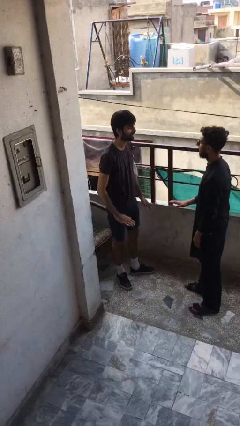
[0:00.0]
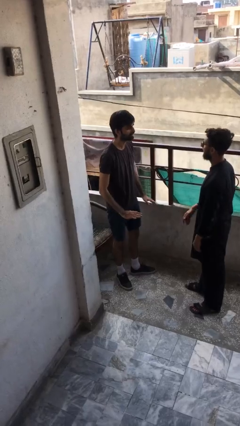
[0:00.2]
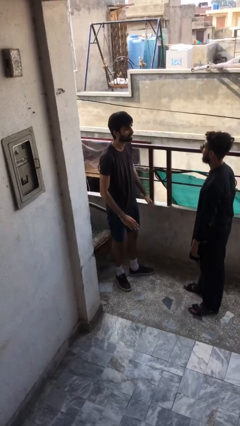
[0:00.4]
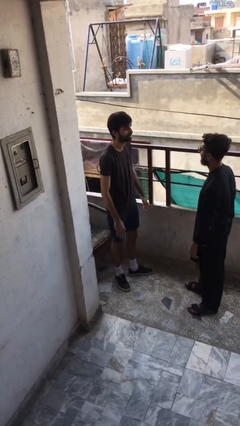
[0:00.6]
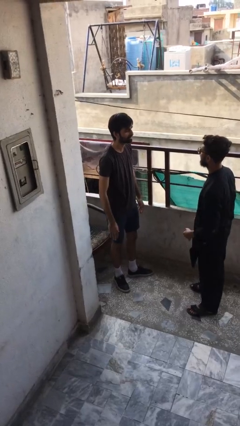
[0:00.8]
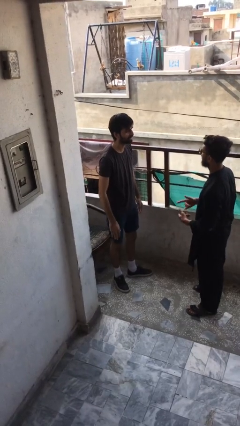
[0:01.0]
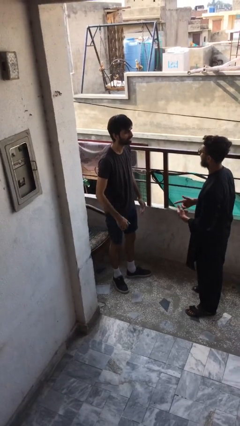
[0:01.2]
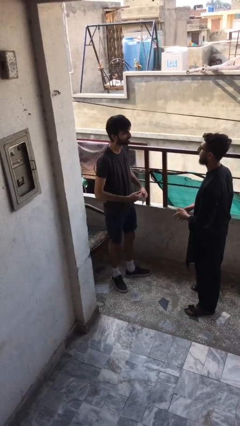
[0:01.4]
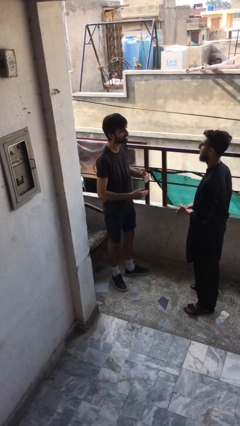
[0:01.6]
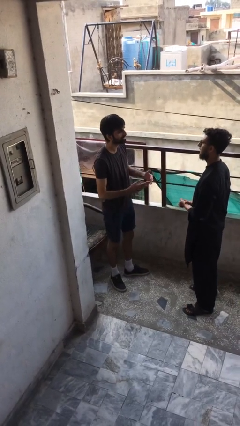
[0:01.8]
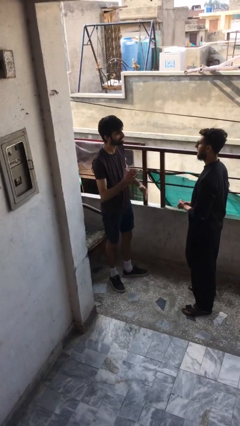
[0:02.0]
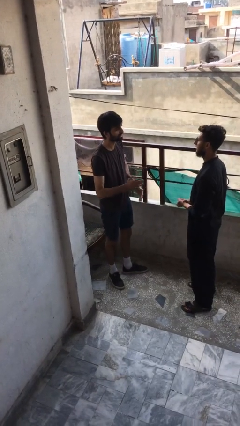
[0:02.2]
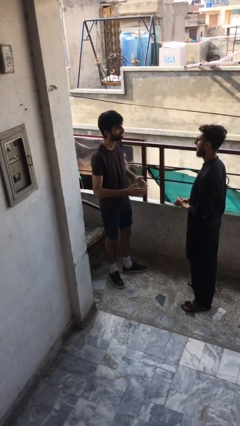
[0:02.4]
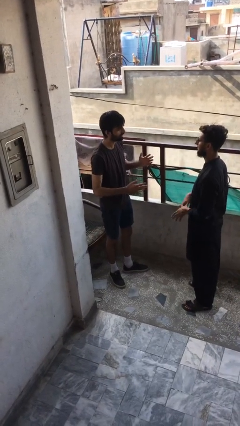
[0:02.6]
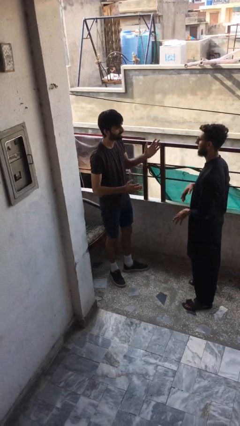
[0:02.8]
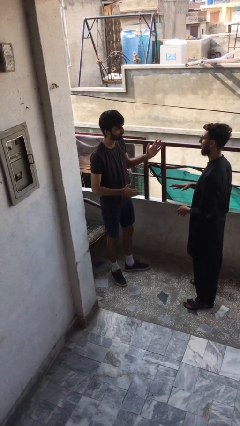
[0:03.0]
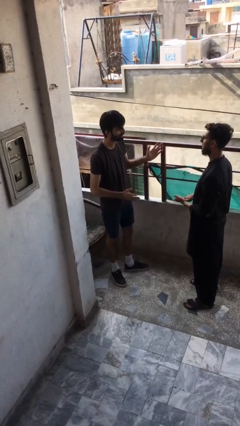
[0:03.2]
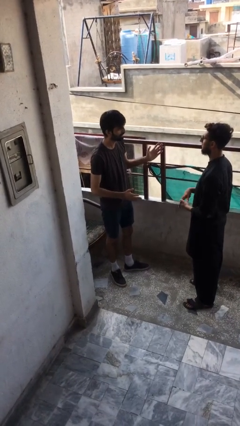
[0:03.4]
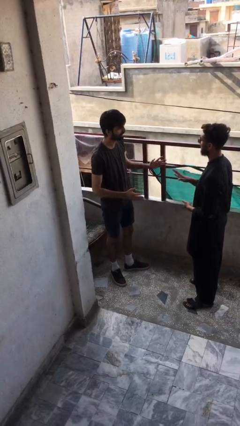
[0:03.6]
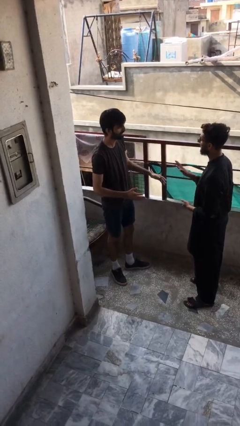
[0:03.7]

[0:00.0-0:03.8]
person talks to person

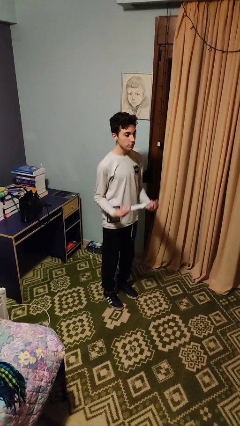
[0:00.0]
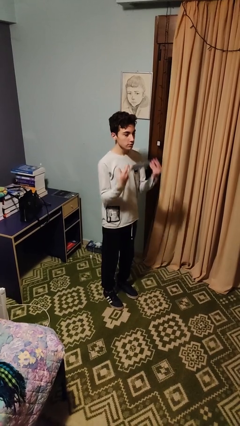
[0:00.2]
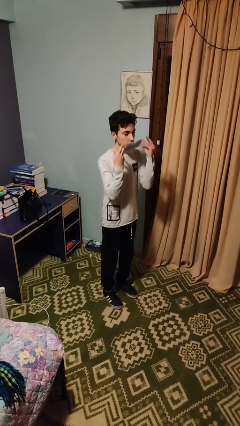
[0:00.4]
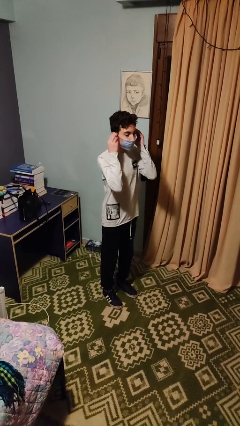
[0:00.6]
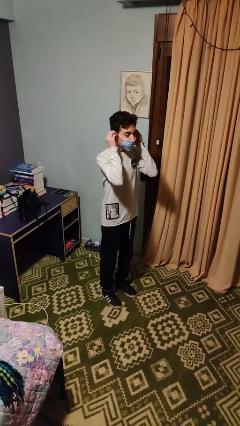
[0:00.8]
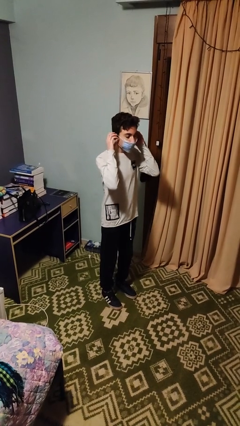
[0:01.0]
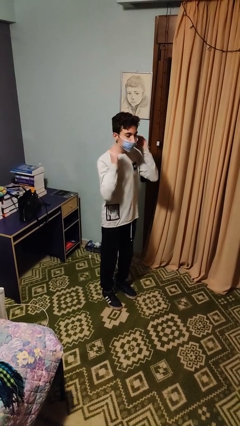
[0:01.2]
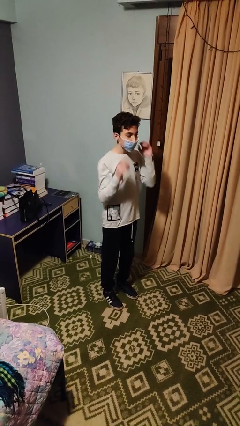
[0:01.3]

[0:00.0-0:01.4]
person puts on facemask

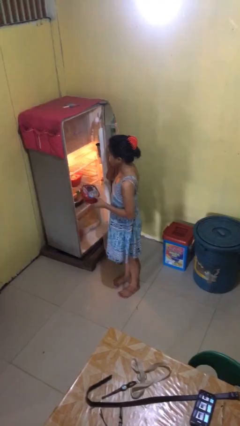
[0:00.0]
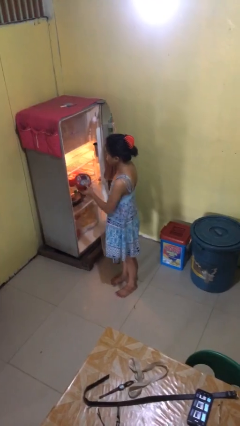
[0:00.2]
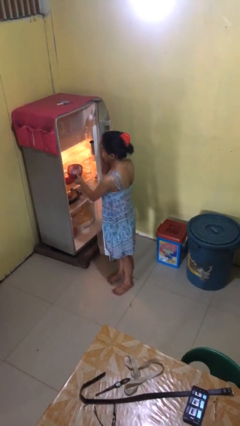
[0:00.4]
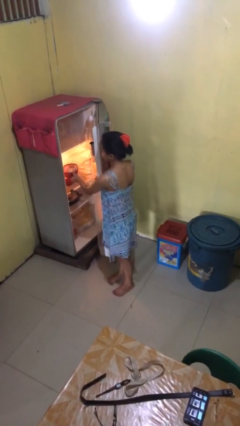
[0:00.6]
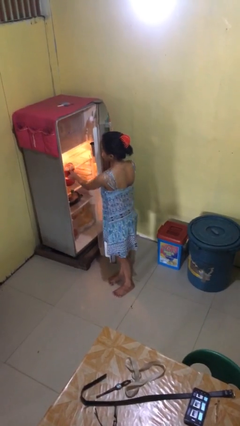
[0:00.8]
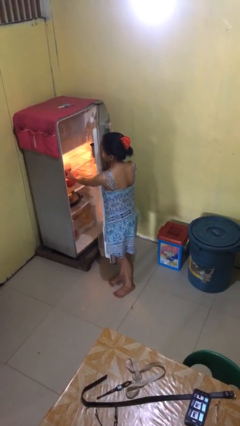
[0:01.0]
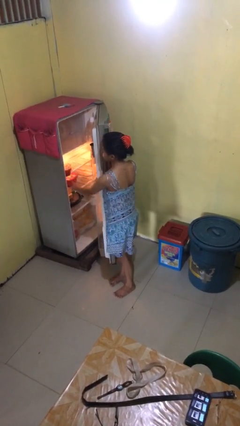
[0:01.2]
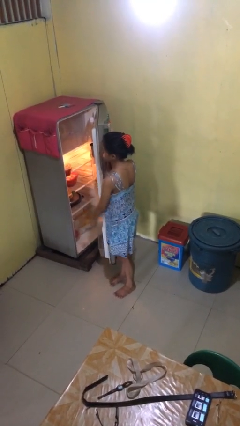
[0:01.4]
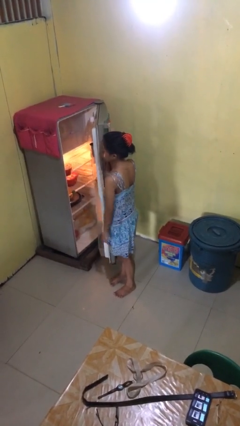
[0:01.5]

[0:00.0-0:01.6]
person puts object into refrigerator

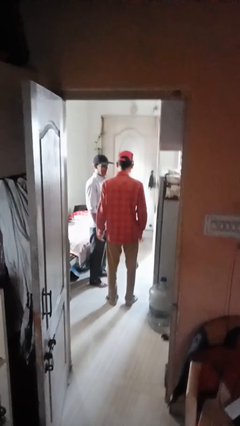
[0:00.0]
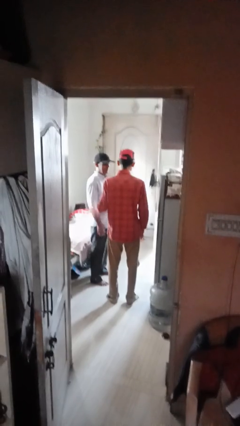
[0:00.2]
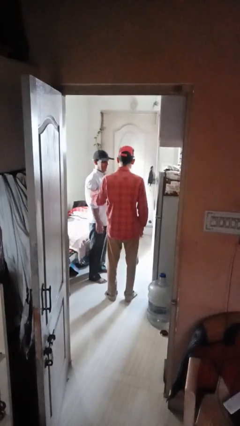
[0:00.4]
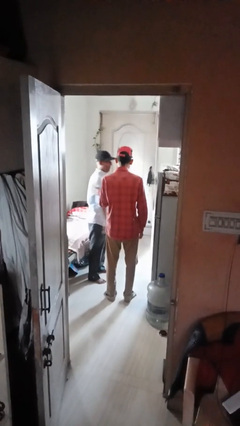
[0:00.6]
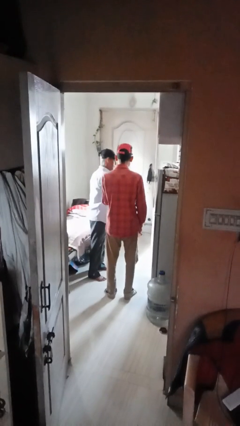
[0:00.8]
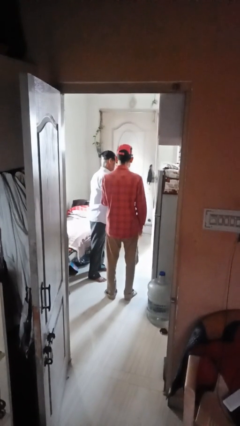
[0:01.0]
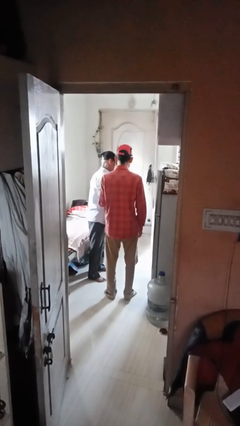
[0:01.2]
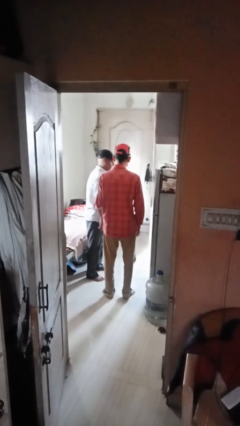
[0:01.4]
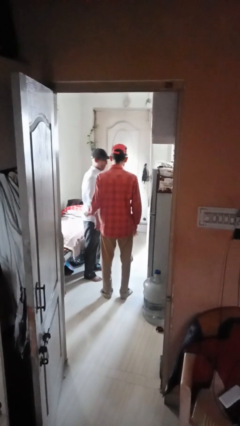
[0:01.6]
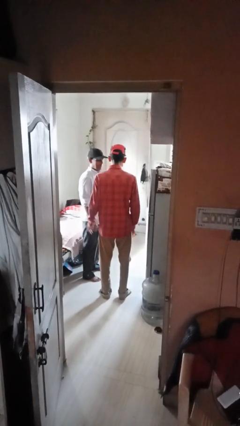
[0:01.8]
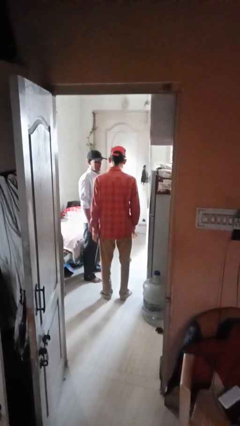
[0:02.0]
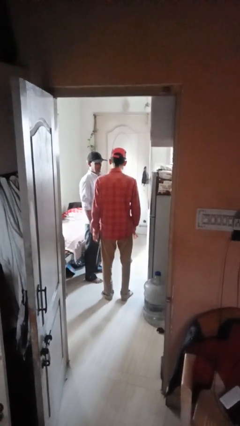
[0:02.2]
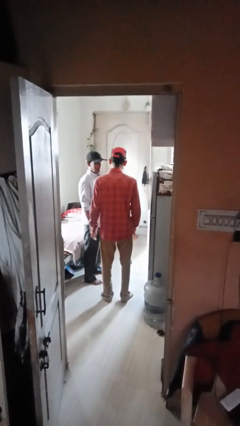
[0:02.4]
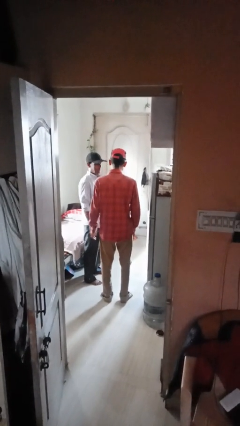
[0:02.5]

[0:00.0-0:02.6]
person shoves person

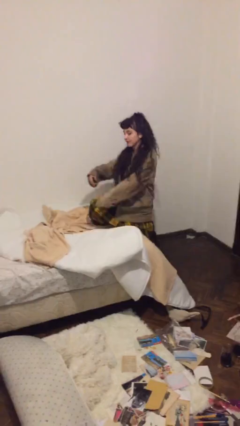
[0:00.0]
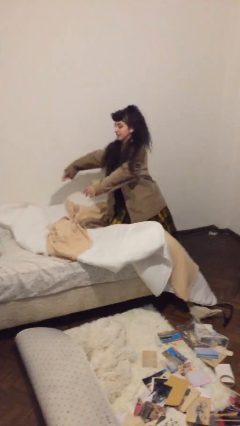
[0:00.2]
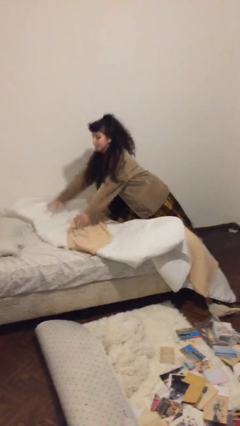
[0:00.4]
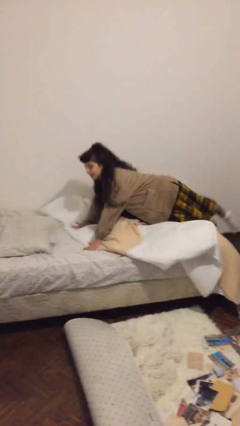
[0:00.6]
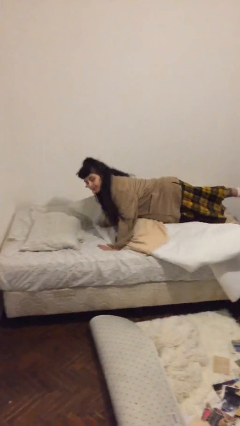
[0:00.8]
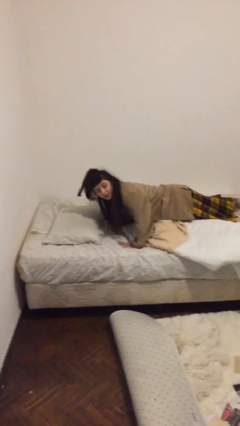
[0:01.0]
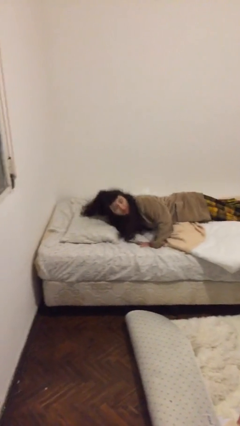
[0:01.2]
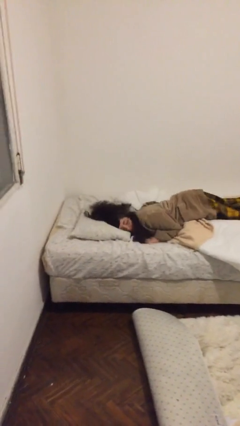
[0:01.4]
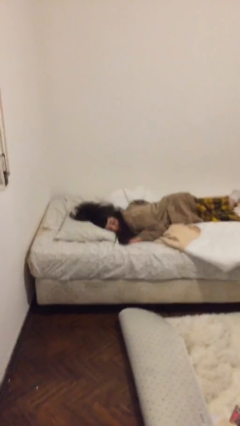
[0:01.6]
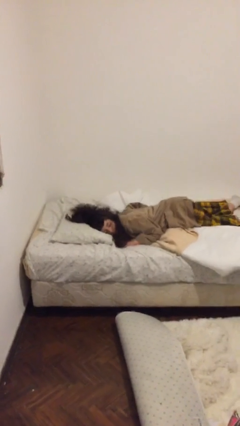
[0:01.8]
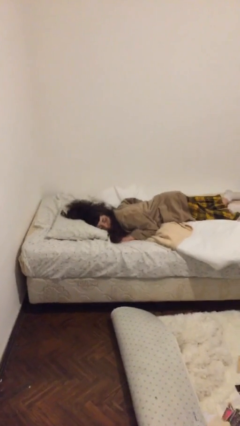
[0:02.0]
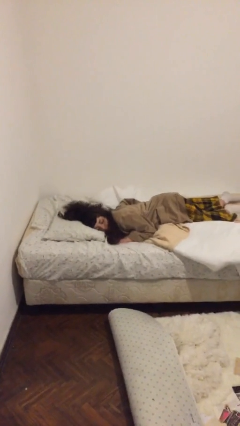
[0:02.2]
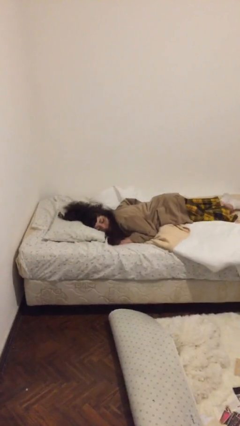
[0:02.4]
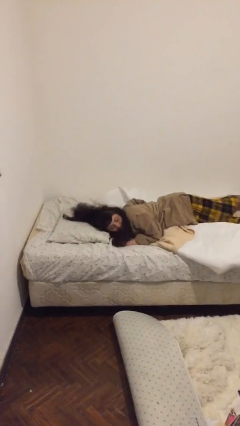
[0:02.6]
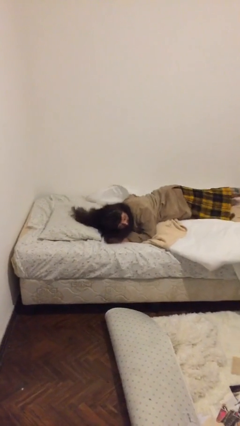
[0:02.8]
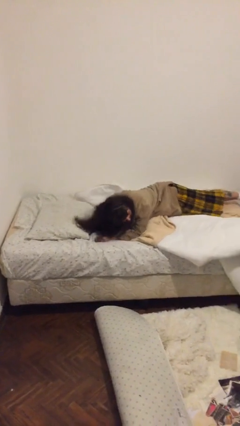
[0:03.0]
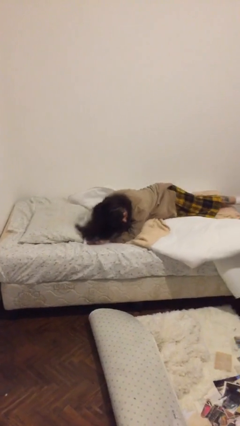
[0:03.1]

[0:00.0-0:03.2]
person lies down on bed

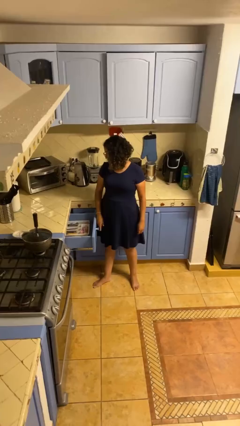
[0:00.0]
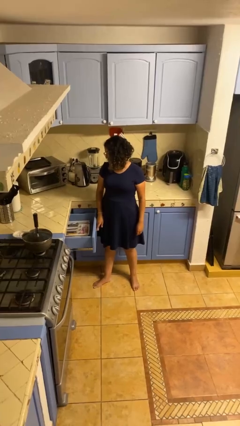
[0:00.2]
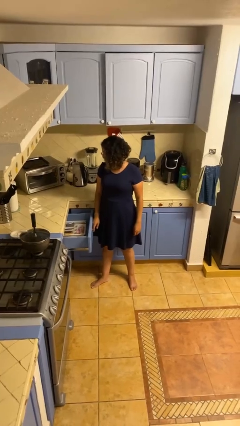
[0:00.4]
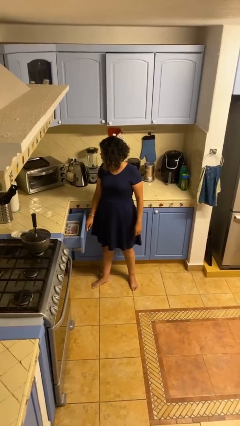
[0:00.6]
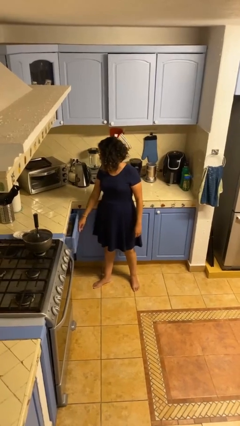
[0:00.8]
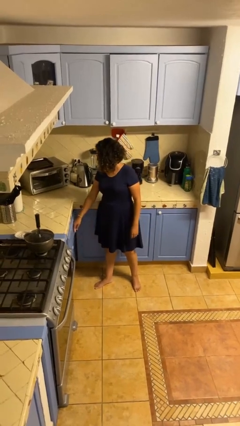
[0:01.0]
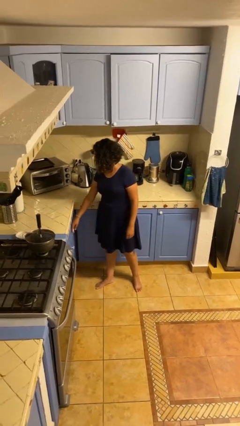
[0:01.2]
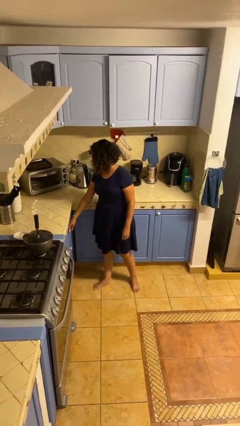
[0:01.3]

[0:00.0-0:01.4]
person closes kitchen drawer

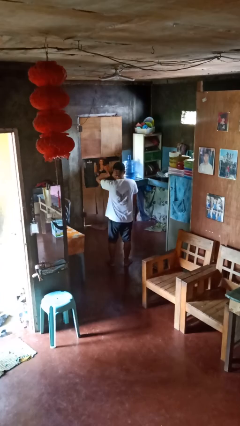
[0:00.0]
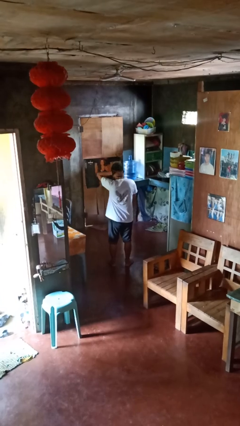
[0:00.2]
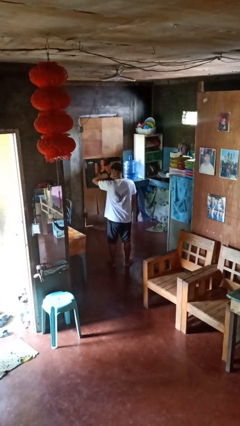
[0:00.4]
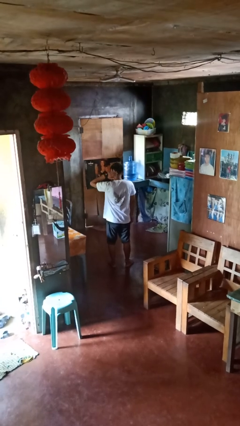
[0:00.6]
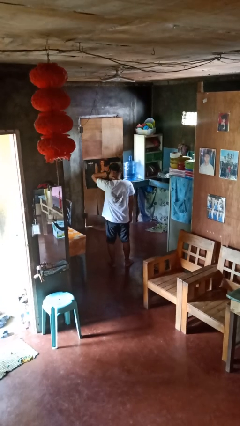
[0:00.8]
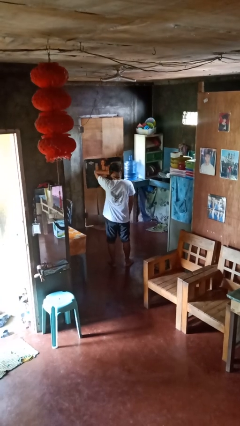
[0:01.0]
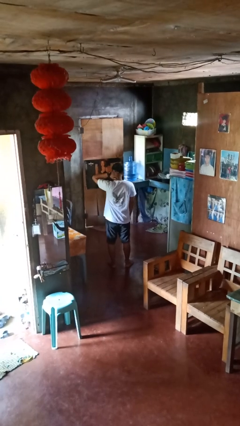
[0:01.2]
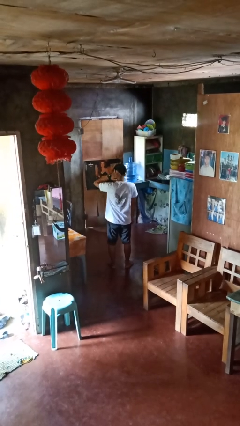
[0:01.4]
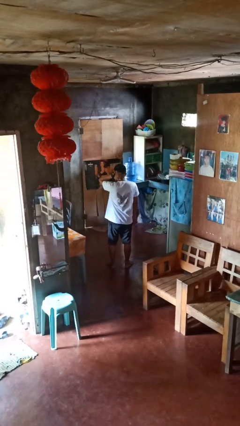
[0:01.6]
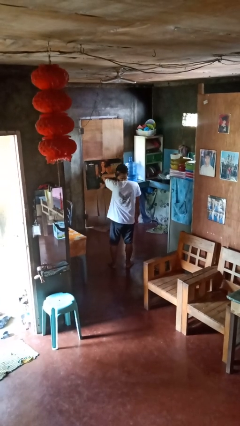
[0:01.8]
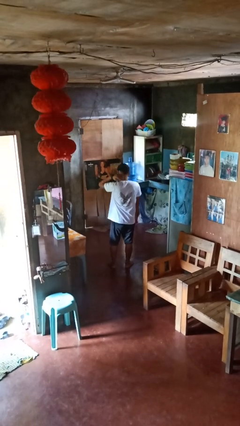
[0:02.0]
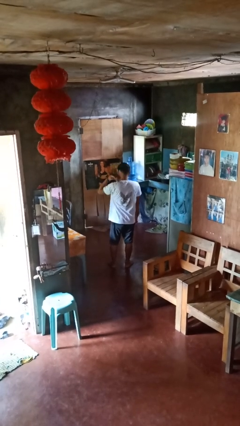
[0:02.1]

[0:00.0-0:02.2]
person rubs neck

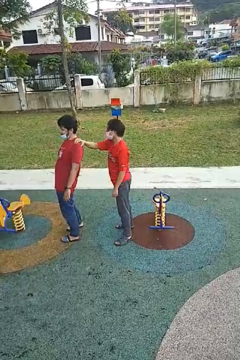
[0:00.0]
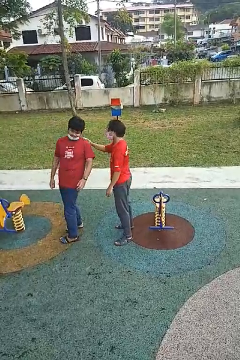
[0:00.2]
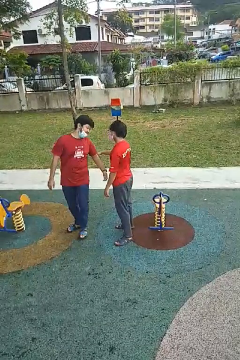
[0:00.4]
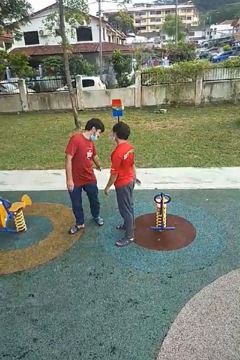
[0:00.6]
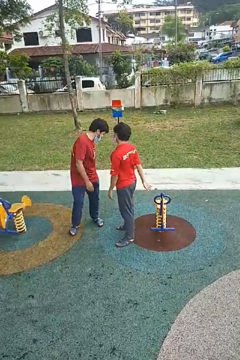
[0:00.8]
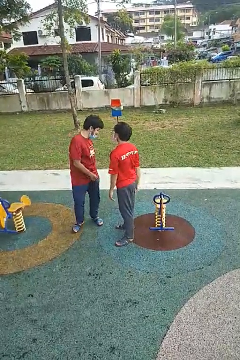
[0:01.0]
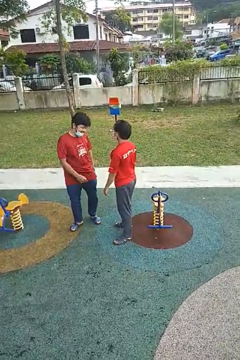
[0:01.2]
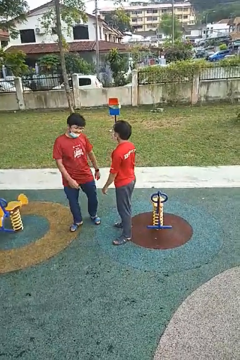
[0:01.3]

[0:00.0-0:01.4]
person spins person around
